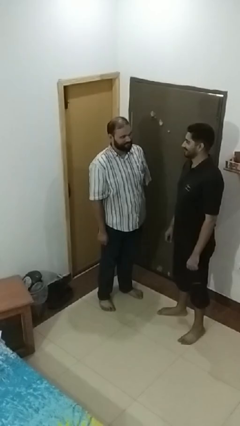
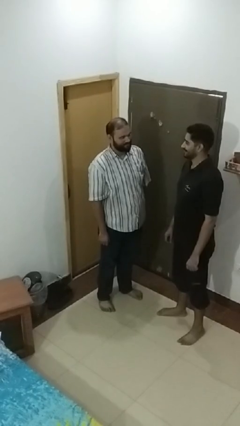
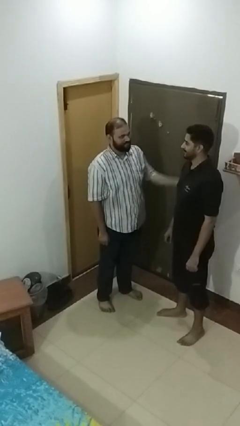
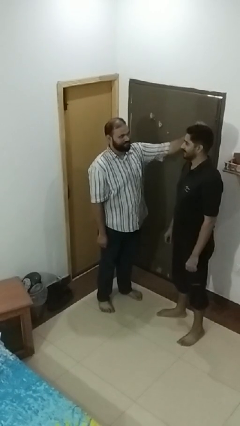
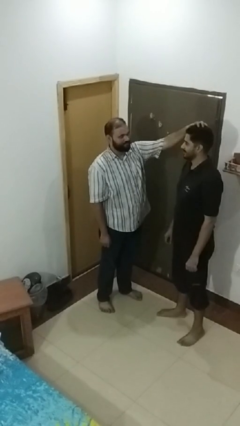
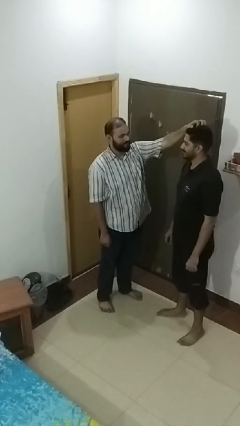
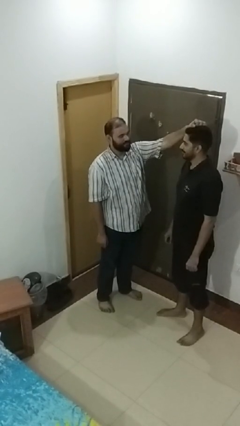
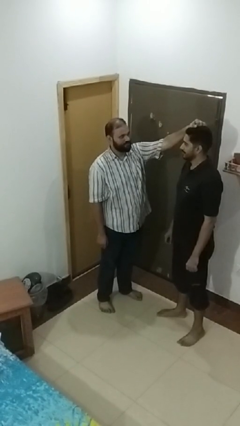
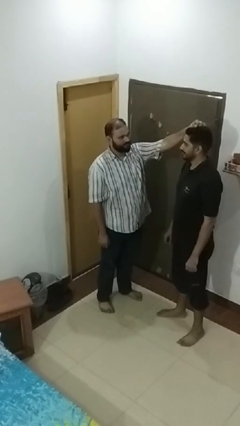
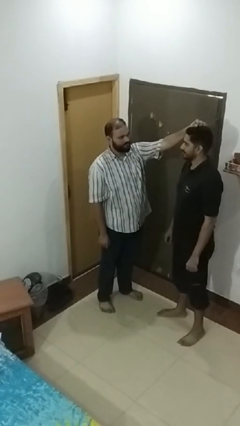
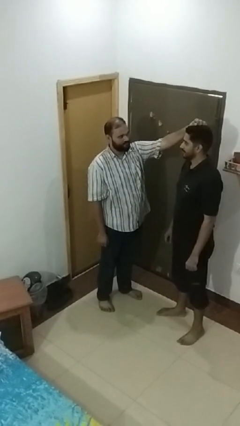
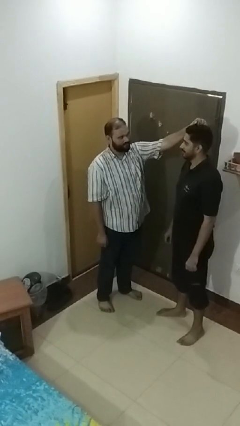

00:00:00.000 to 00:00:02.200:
person grabs person by hair

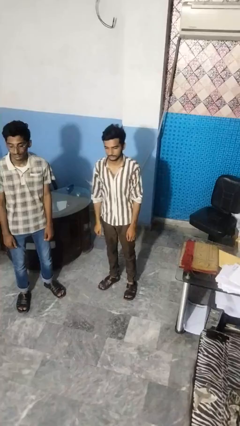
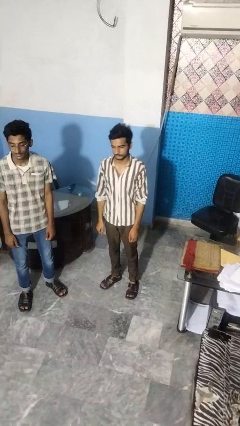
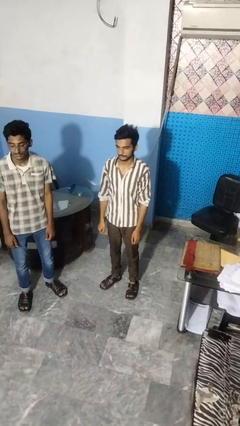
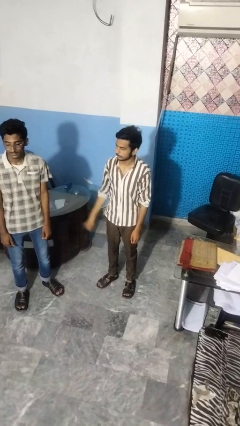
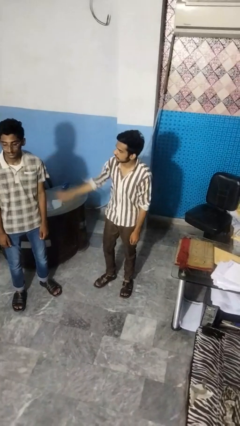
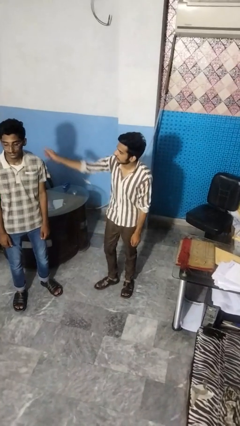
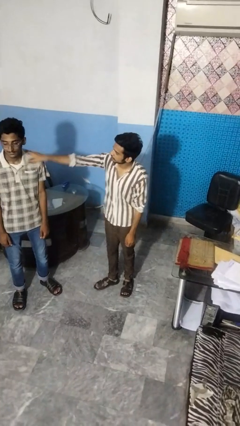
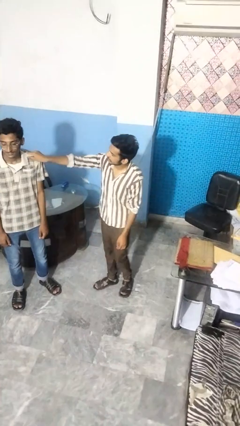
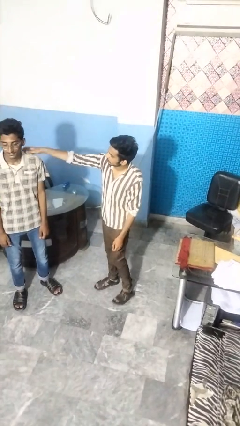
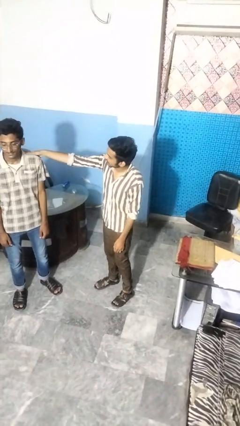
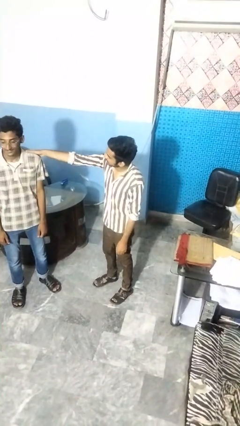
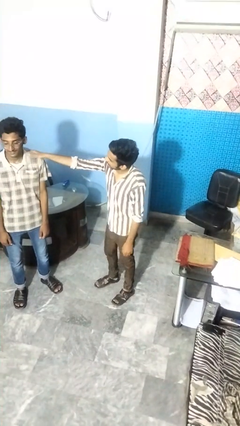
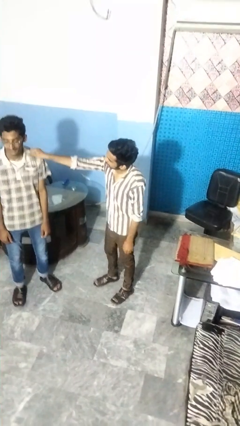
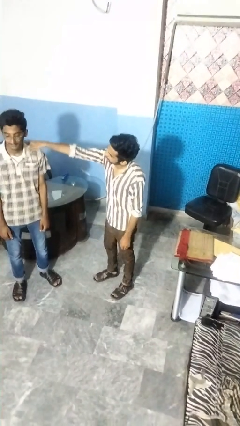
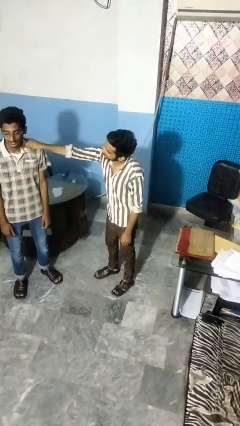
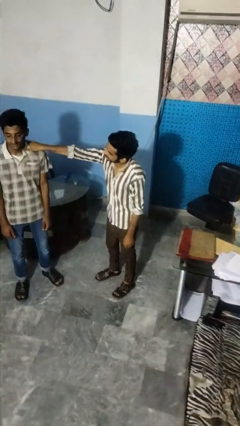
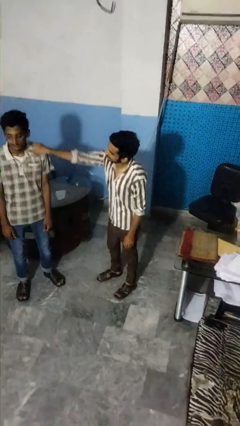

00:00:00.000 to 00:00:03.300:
person pounds shoulders of person

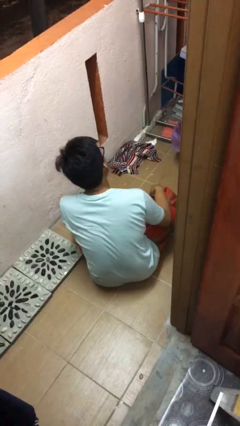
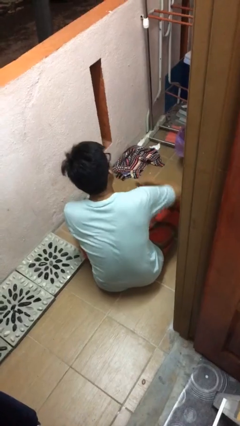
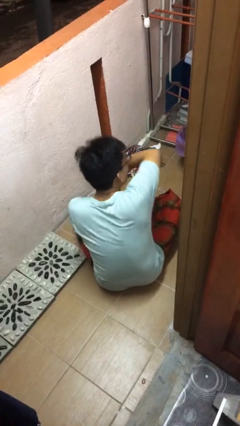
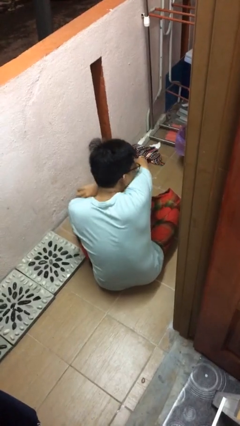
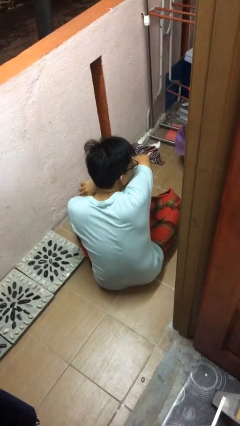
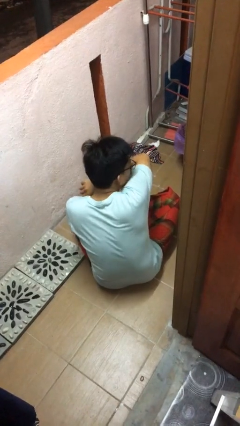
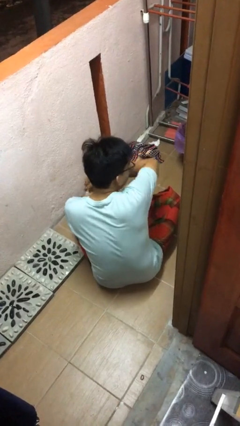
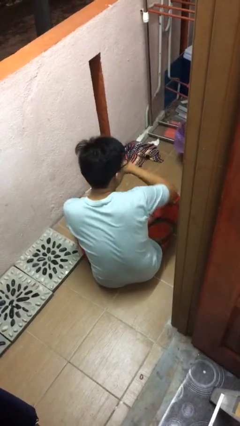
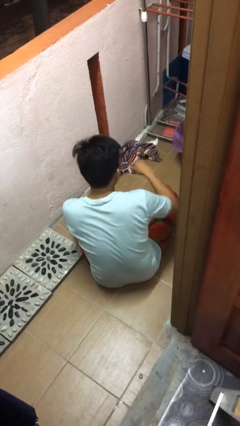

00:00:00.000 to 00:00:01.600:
person sneezes into arm

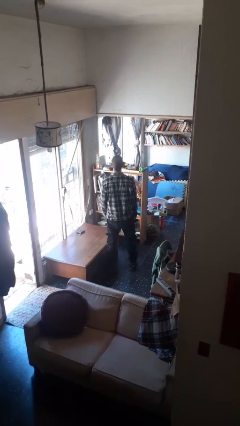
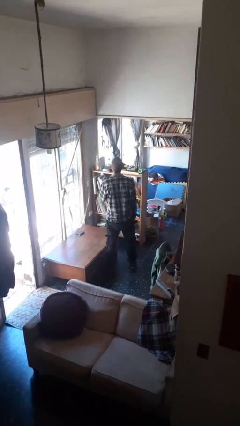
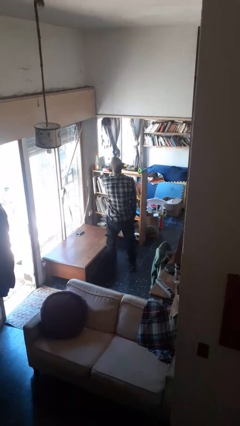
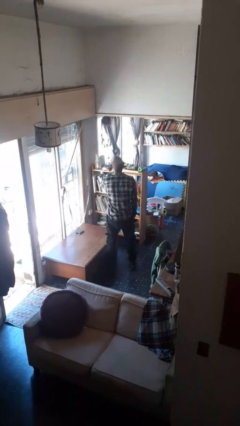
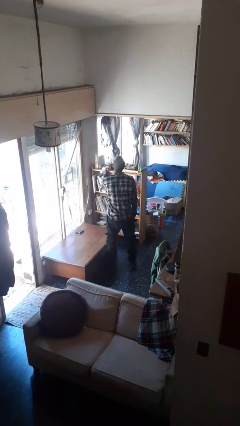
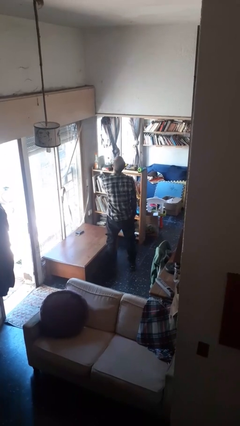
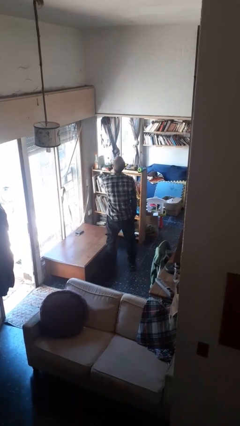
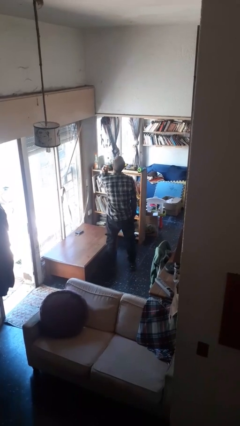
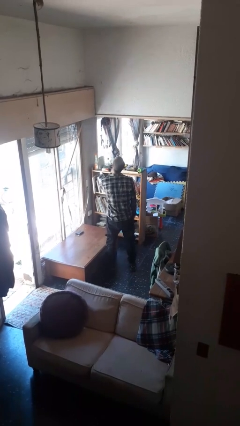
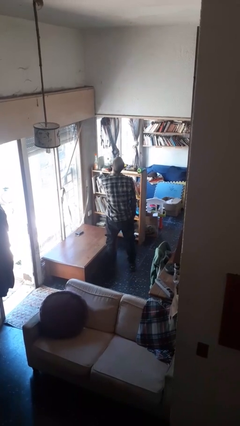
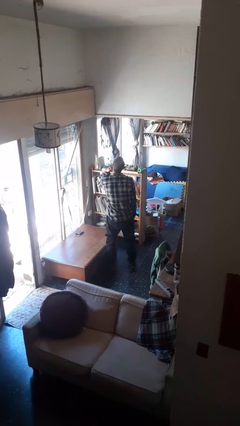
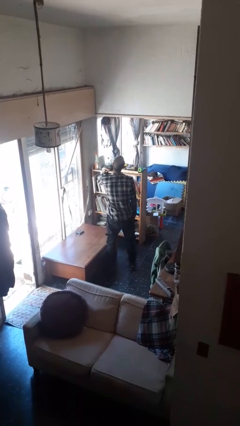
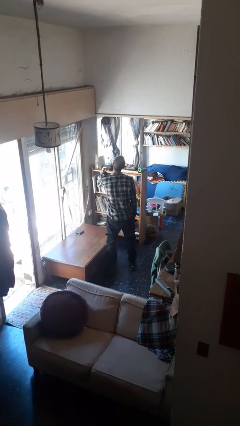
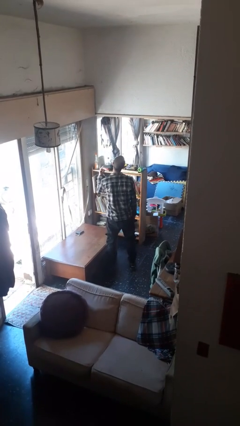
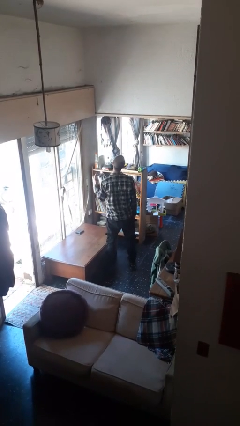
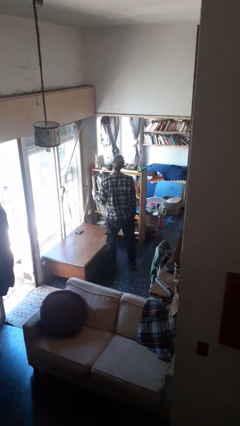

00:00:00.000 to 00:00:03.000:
person gestures cut

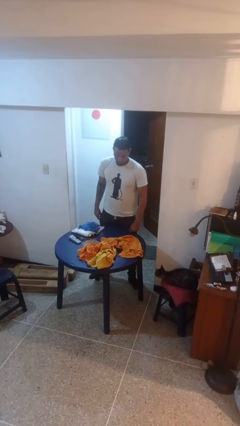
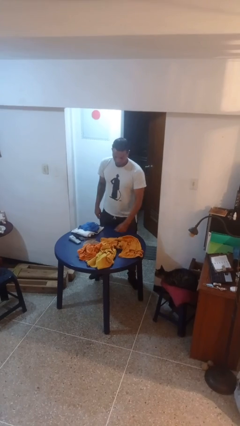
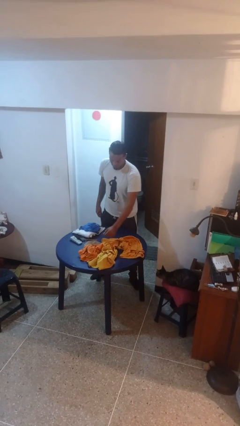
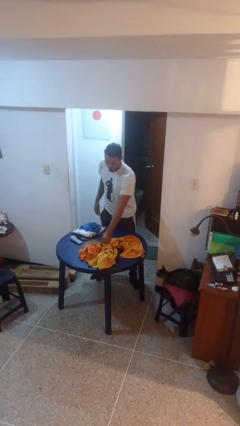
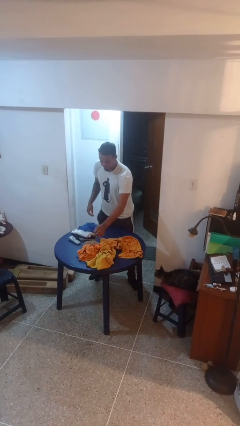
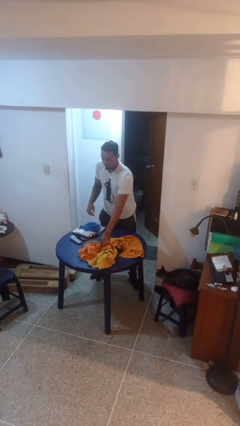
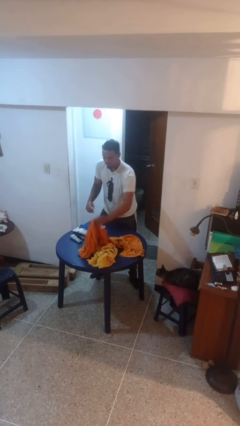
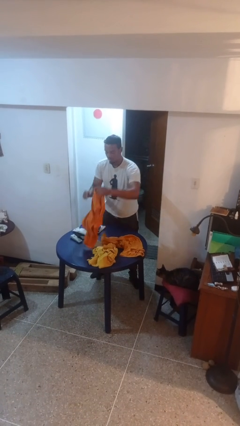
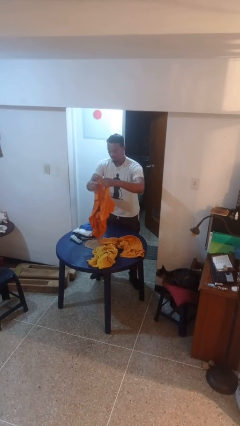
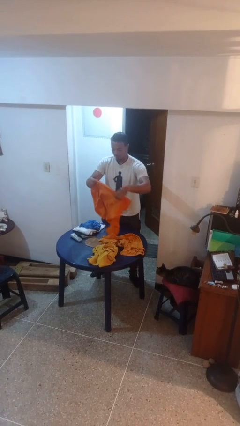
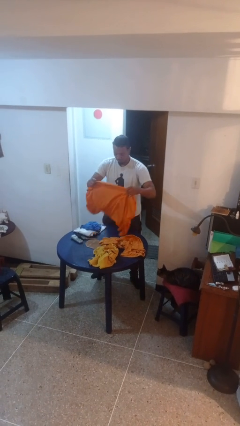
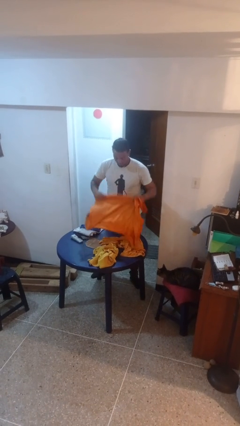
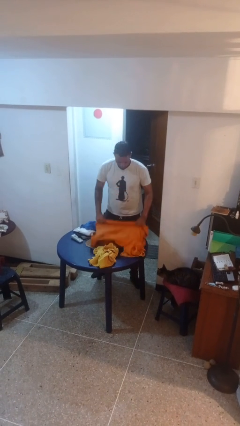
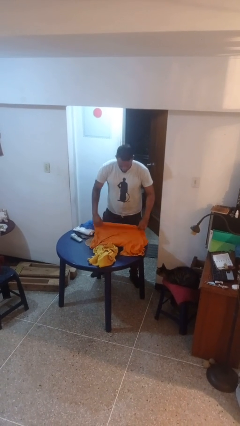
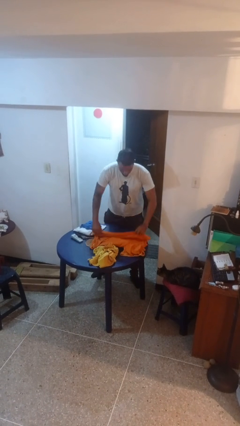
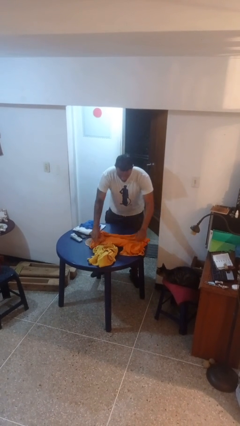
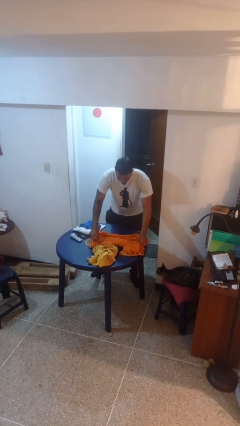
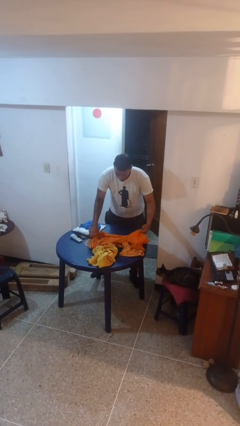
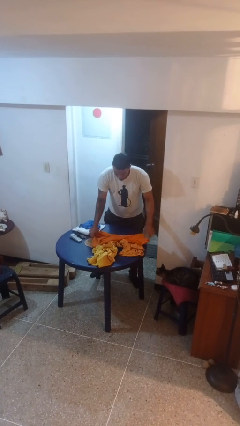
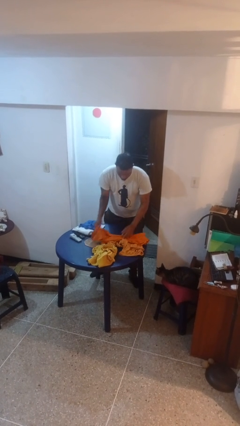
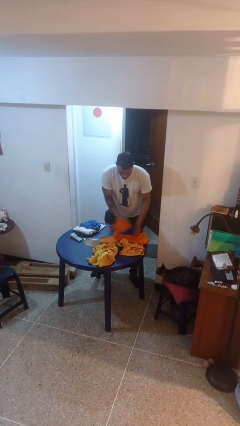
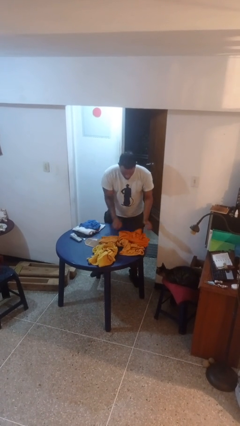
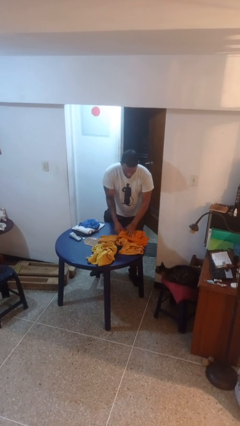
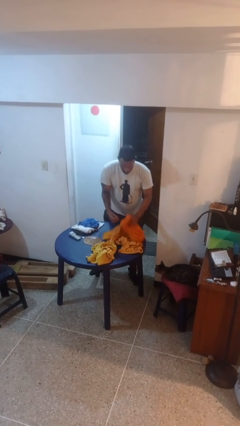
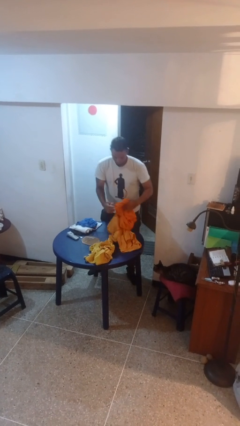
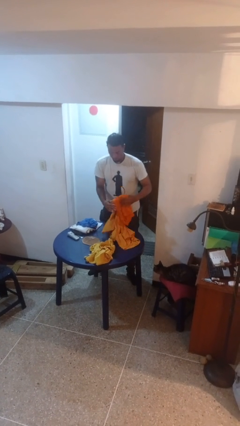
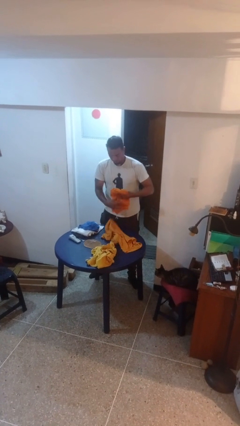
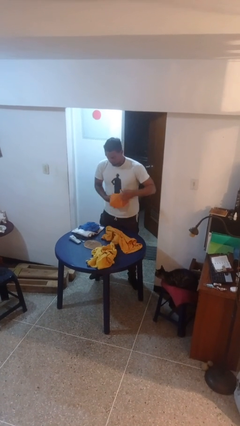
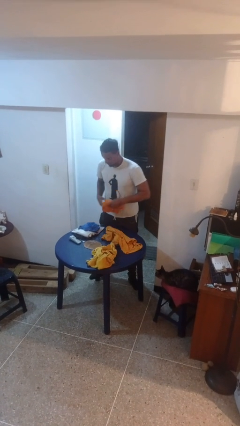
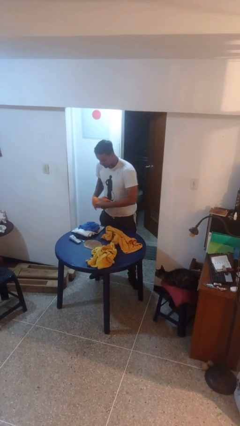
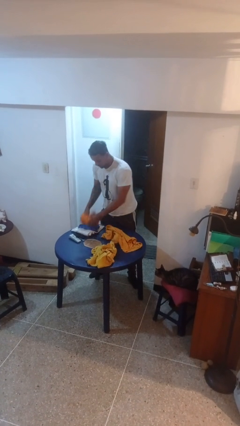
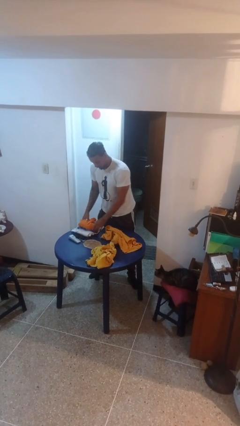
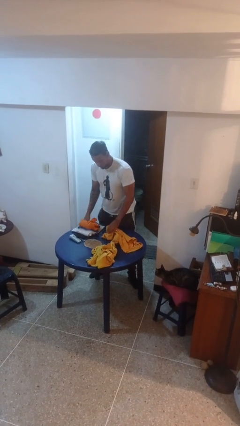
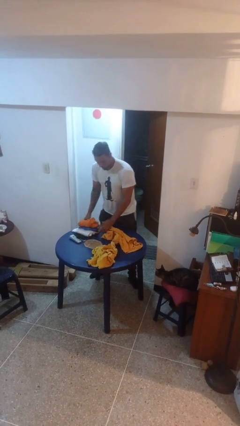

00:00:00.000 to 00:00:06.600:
person folds shirt

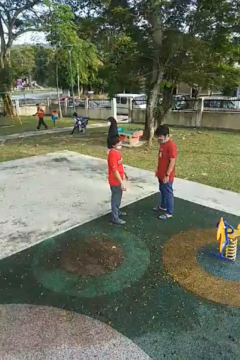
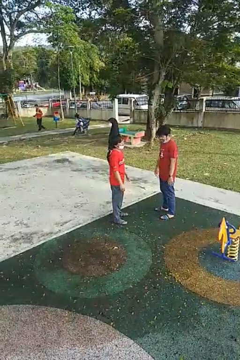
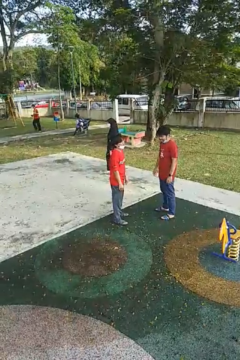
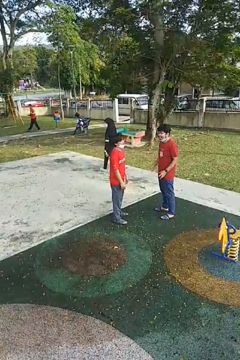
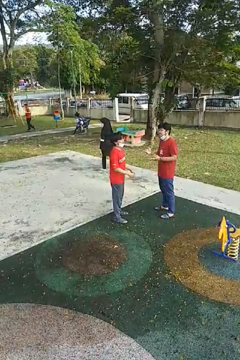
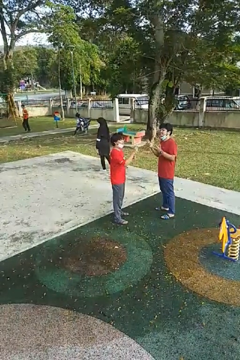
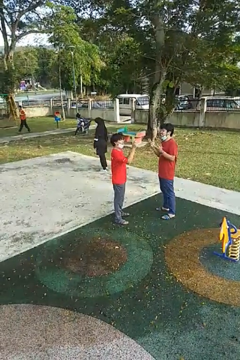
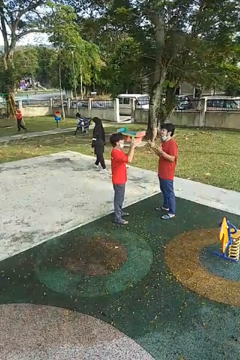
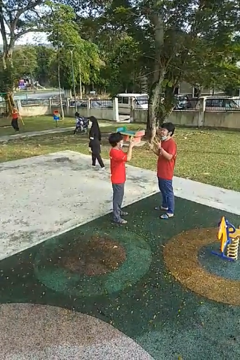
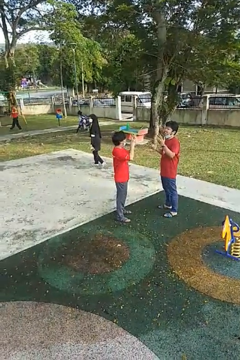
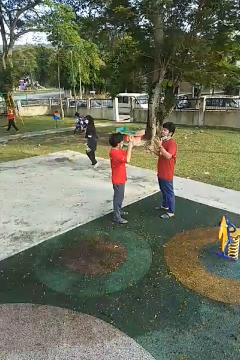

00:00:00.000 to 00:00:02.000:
person talks to person
